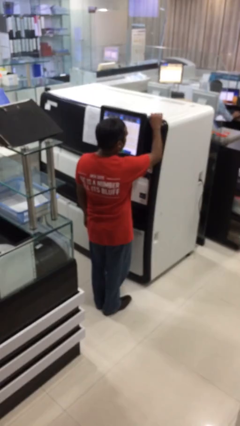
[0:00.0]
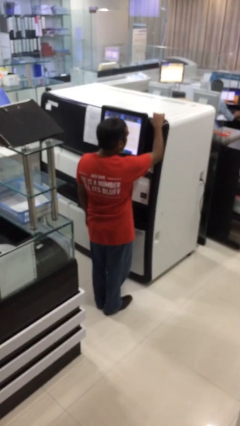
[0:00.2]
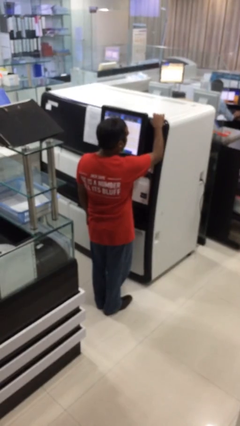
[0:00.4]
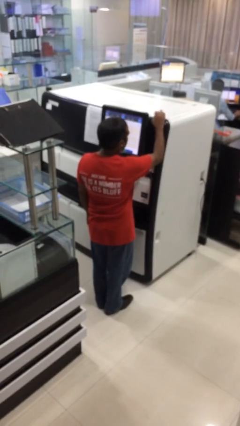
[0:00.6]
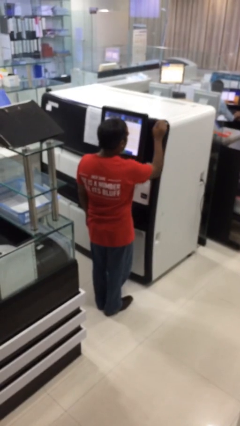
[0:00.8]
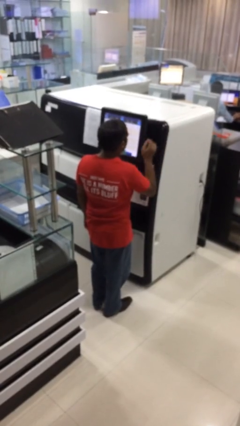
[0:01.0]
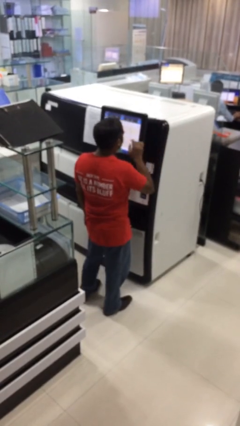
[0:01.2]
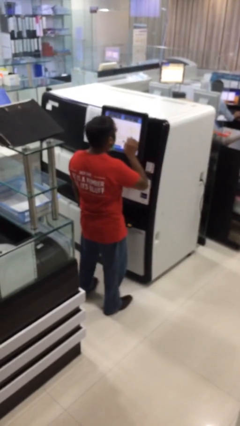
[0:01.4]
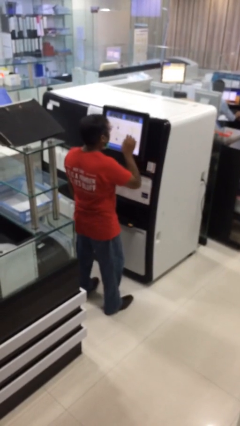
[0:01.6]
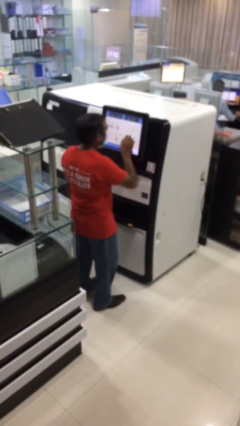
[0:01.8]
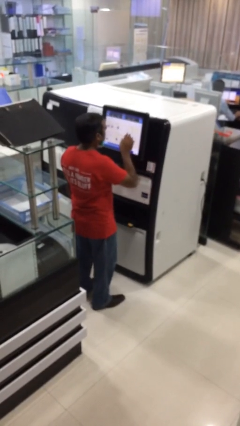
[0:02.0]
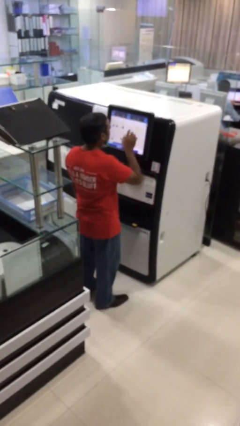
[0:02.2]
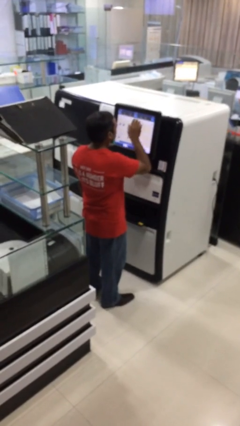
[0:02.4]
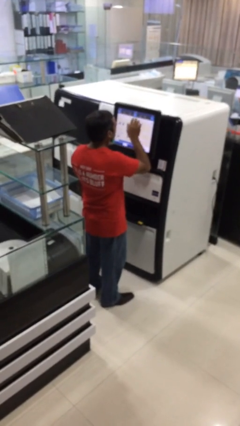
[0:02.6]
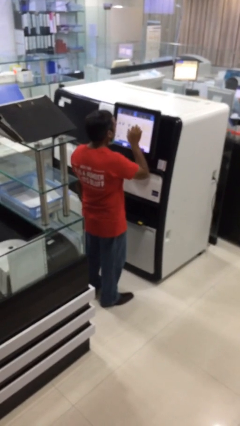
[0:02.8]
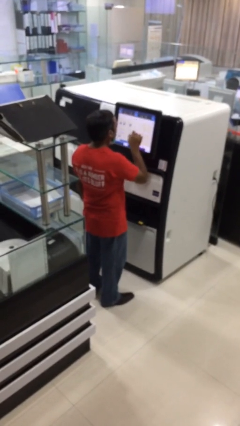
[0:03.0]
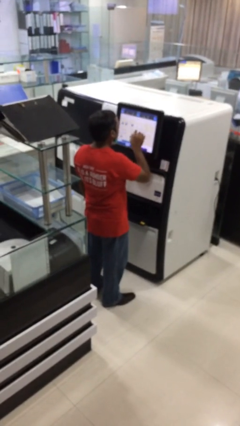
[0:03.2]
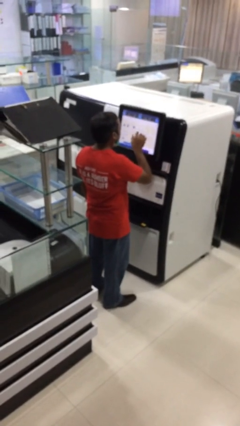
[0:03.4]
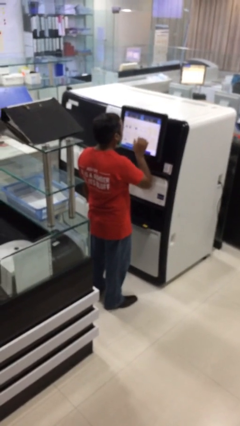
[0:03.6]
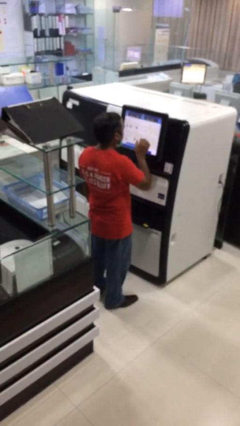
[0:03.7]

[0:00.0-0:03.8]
person purchases from machine

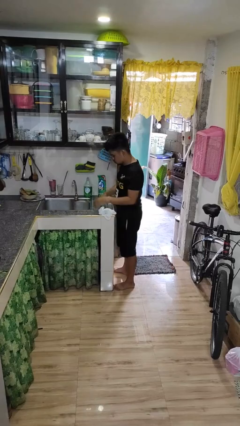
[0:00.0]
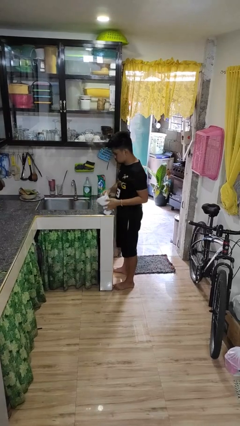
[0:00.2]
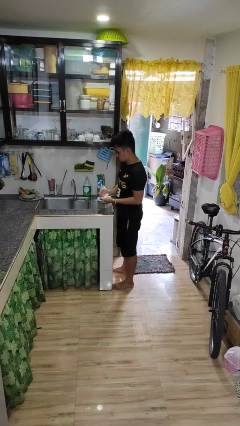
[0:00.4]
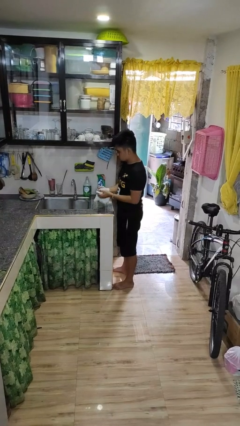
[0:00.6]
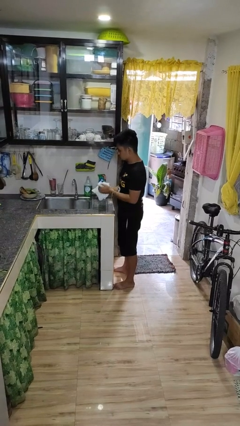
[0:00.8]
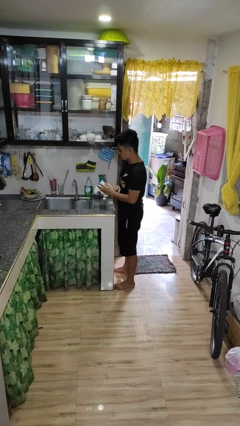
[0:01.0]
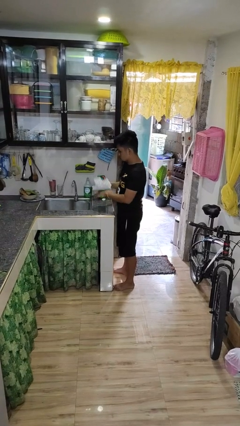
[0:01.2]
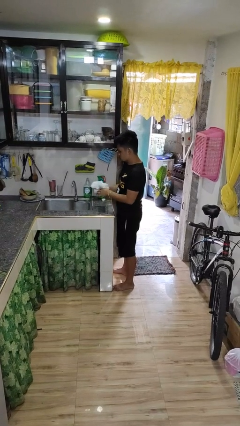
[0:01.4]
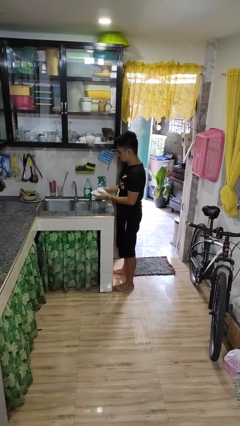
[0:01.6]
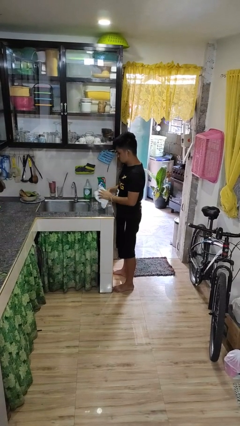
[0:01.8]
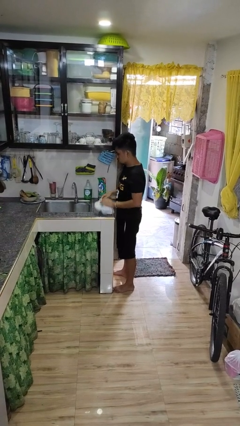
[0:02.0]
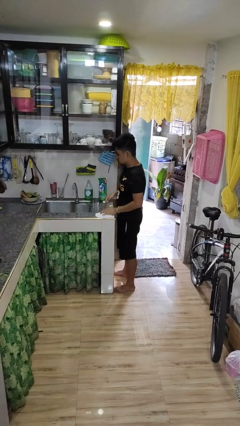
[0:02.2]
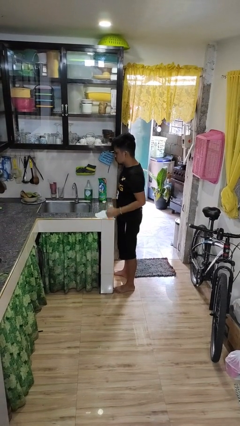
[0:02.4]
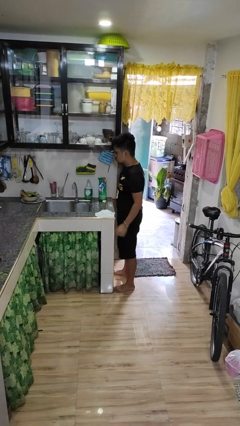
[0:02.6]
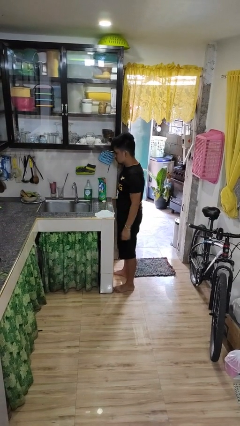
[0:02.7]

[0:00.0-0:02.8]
person dries hands with towel

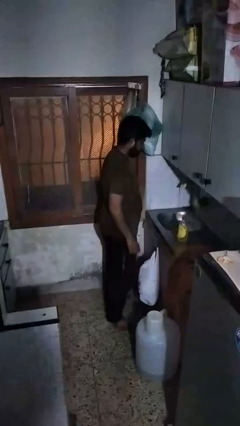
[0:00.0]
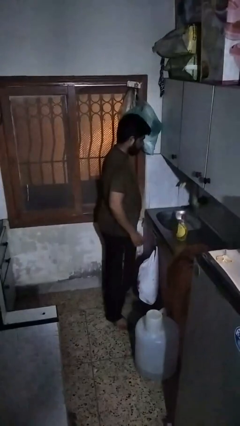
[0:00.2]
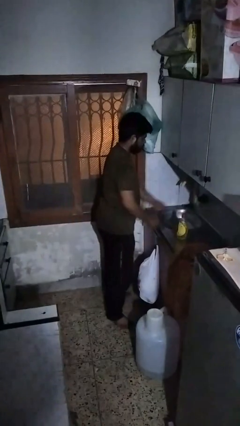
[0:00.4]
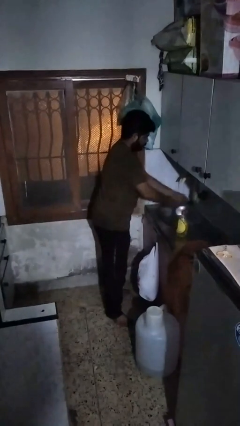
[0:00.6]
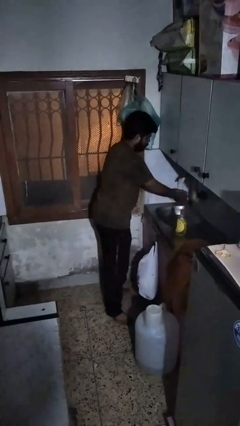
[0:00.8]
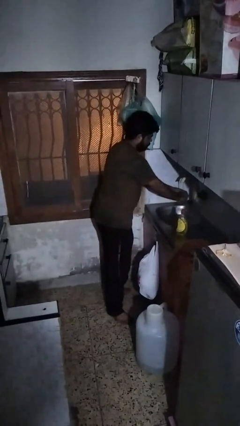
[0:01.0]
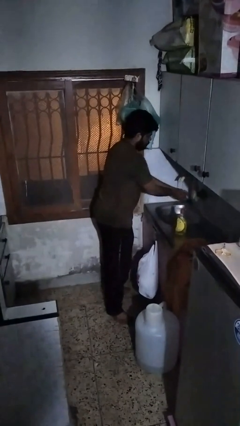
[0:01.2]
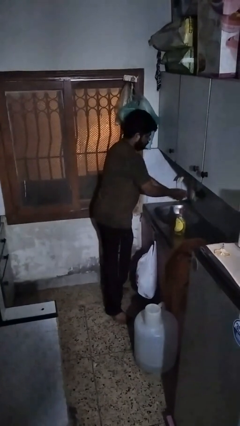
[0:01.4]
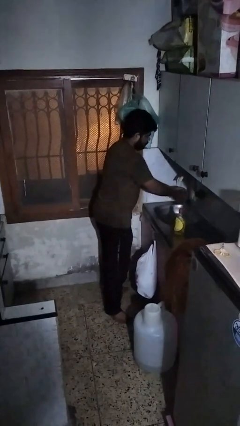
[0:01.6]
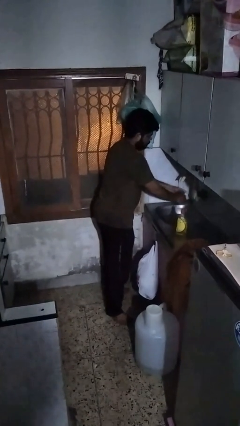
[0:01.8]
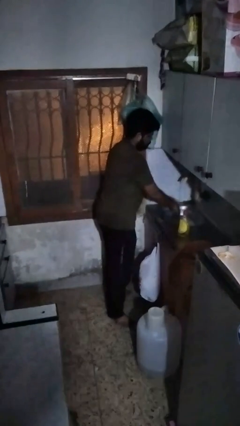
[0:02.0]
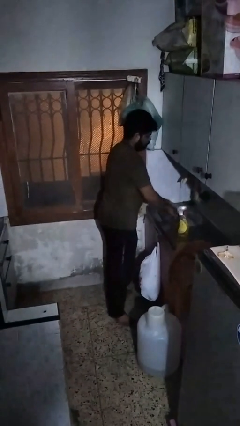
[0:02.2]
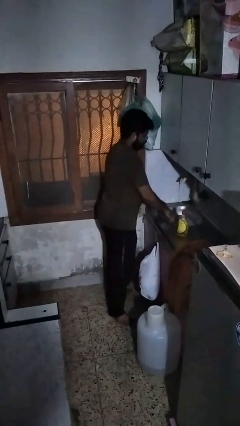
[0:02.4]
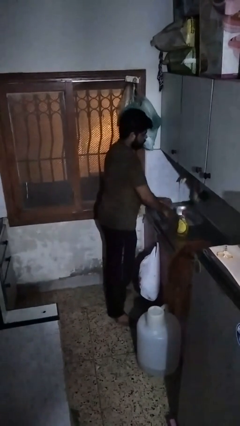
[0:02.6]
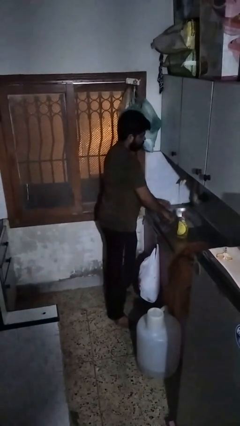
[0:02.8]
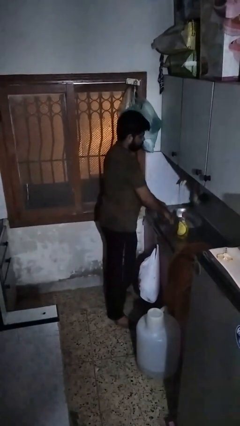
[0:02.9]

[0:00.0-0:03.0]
person washes hands

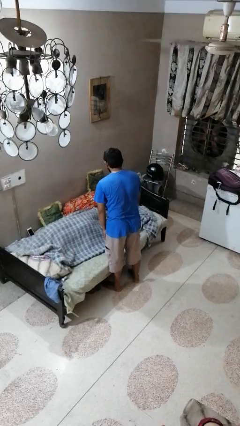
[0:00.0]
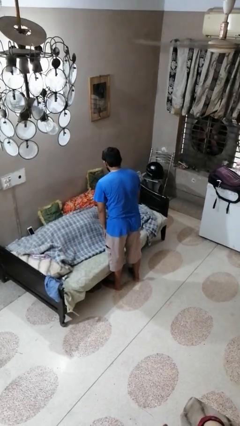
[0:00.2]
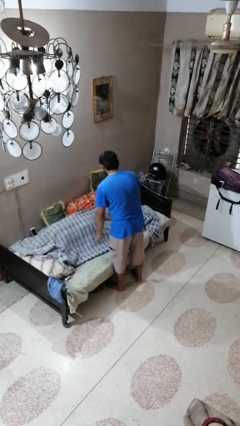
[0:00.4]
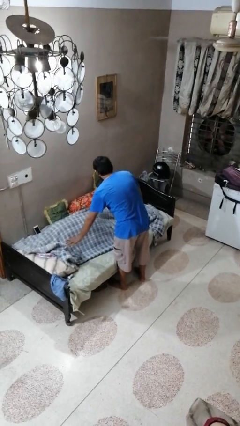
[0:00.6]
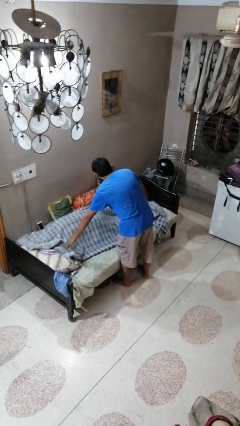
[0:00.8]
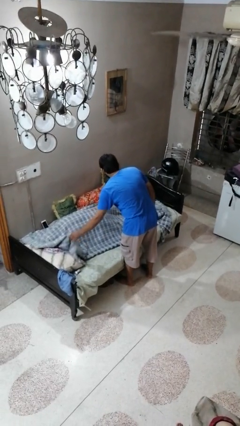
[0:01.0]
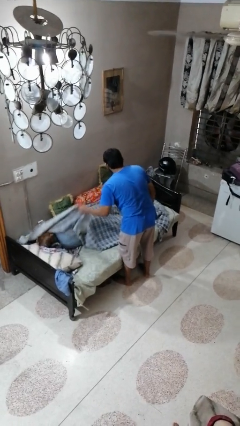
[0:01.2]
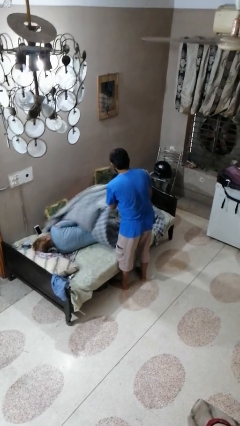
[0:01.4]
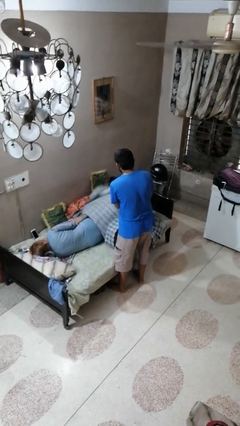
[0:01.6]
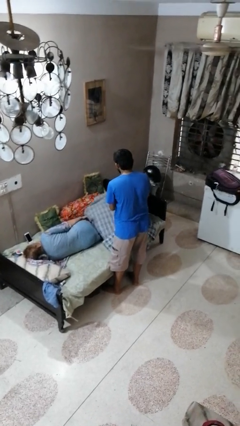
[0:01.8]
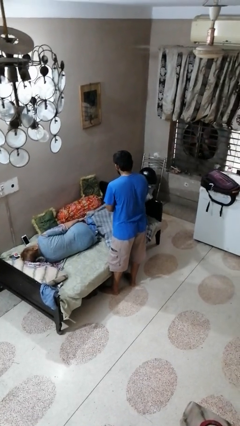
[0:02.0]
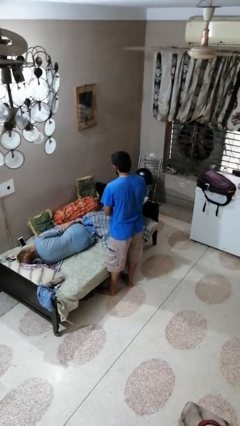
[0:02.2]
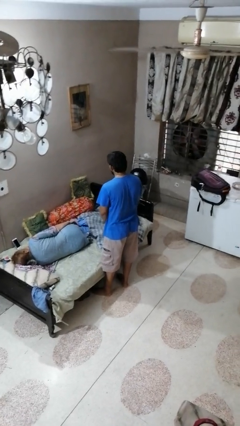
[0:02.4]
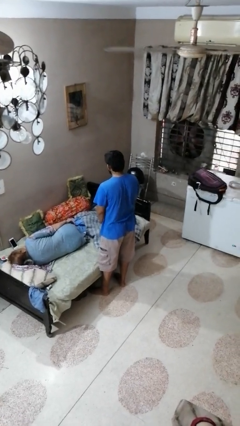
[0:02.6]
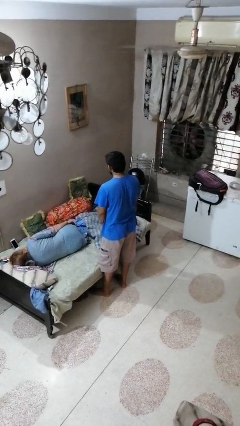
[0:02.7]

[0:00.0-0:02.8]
person uncovers friend with blanket

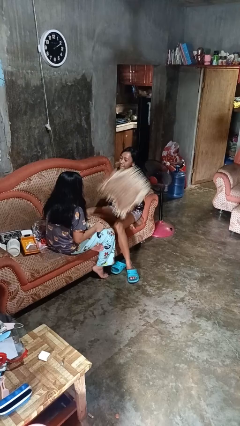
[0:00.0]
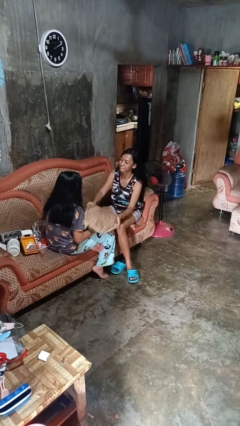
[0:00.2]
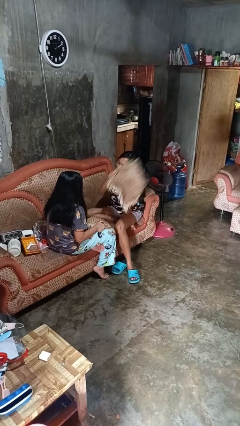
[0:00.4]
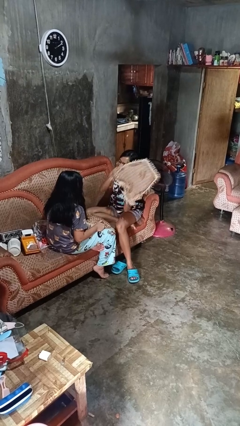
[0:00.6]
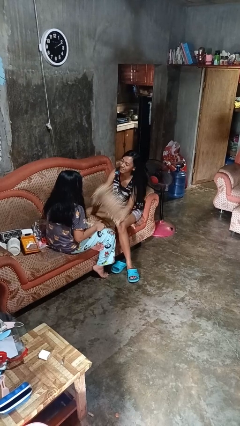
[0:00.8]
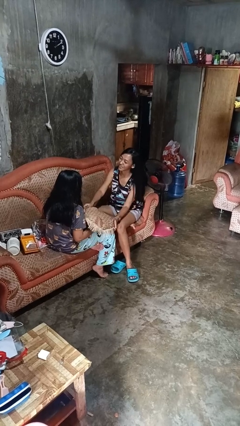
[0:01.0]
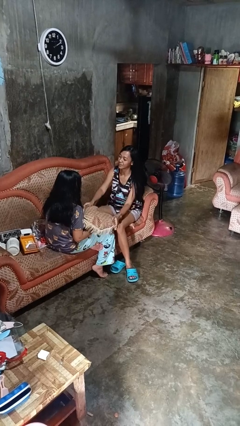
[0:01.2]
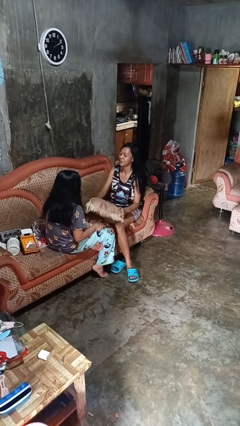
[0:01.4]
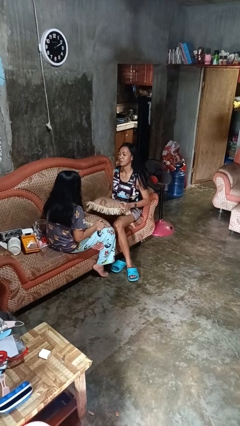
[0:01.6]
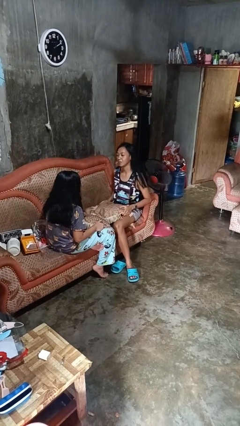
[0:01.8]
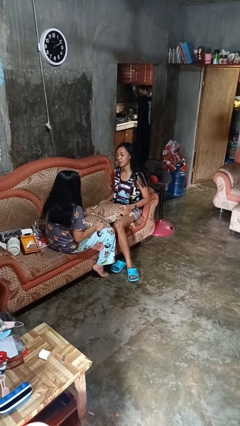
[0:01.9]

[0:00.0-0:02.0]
person hits person with pillow

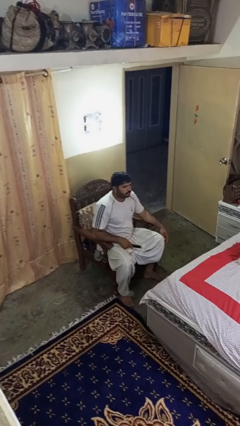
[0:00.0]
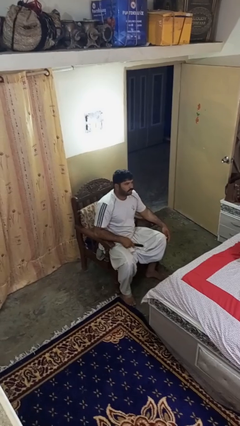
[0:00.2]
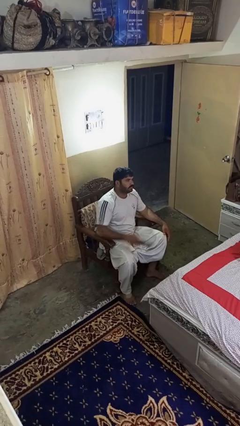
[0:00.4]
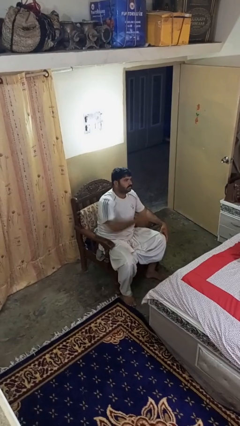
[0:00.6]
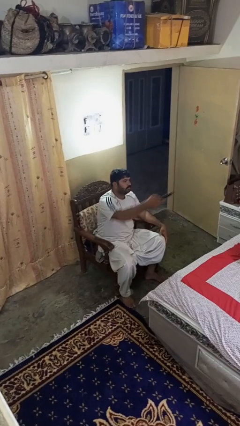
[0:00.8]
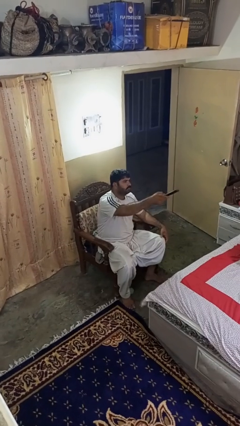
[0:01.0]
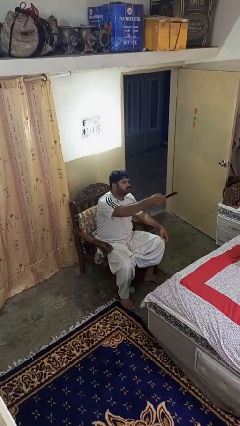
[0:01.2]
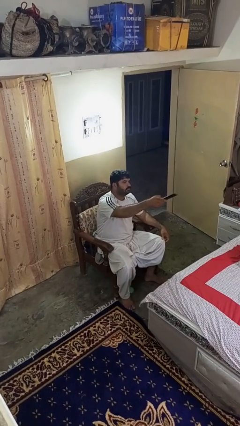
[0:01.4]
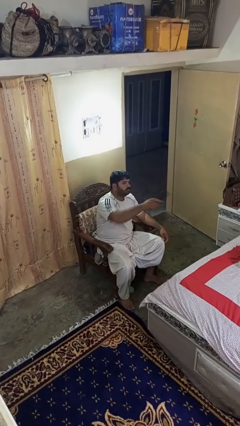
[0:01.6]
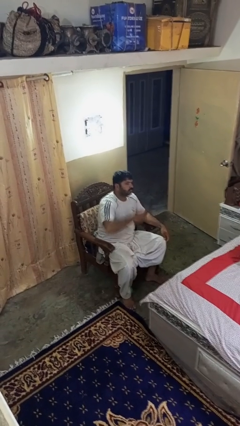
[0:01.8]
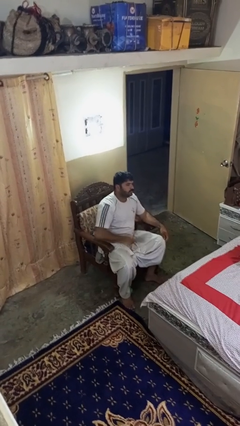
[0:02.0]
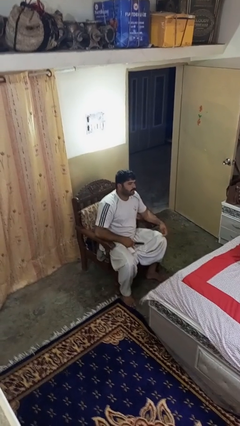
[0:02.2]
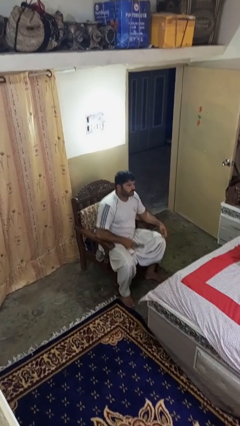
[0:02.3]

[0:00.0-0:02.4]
person uses television remote

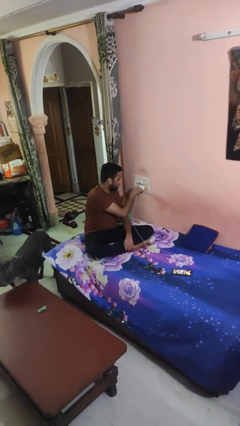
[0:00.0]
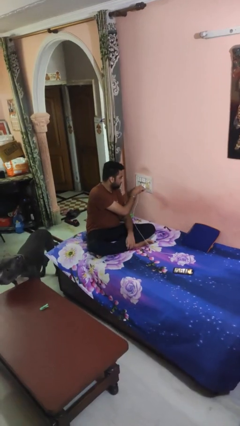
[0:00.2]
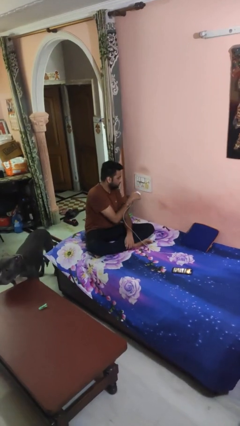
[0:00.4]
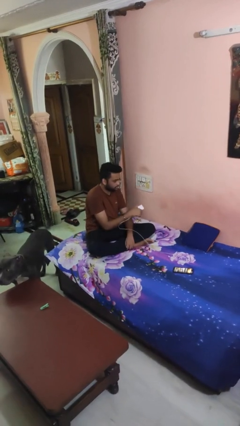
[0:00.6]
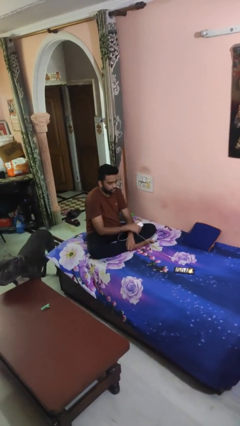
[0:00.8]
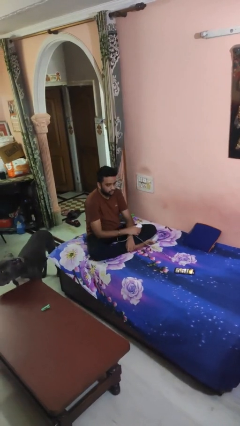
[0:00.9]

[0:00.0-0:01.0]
person unplugs from electrical socket
